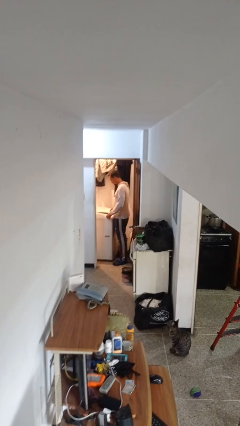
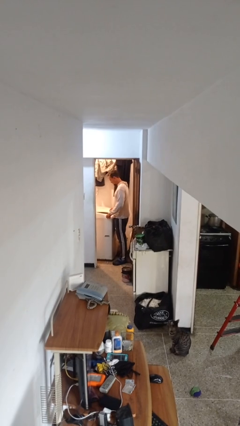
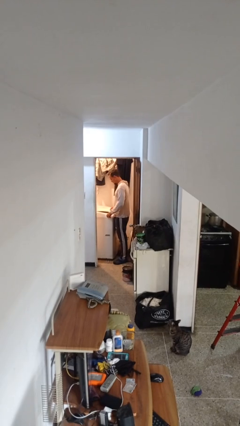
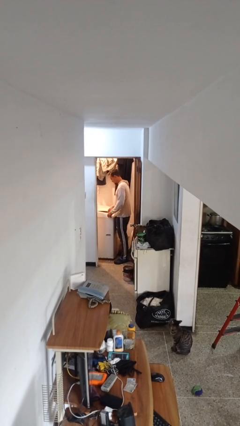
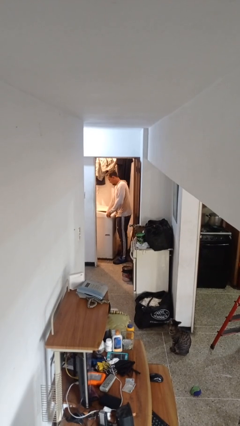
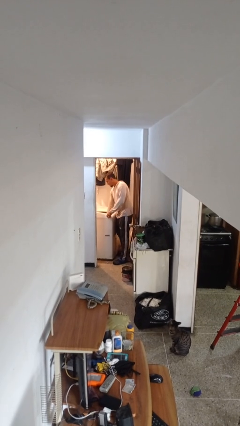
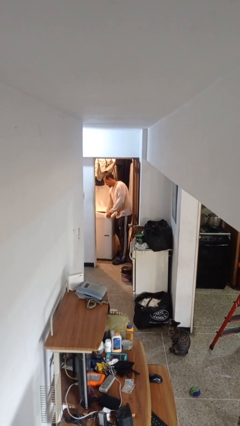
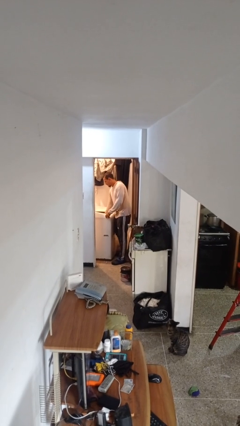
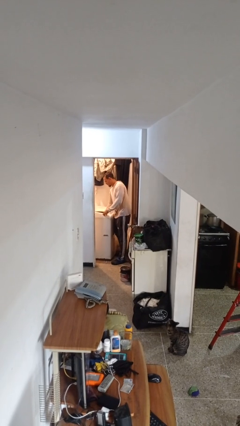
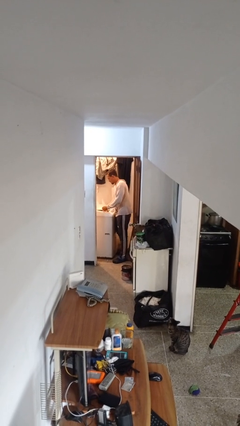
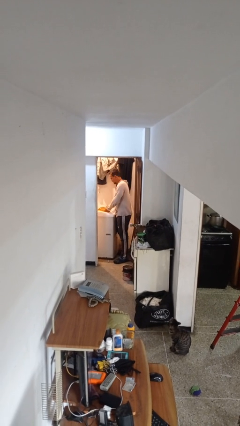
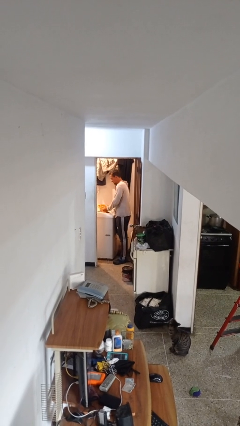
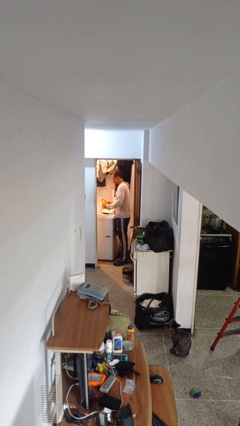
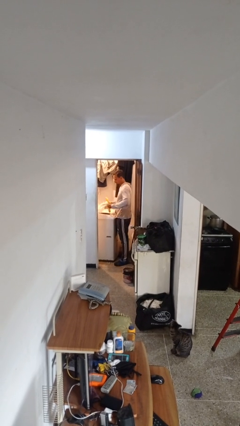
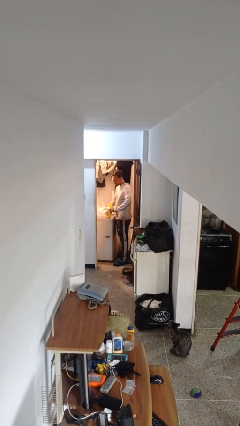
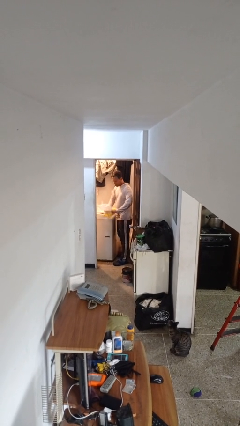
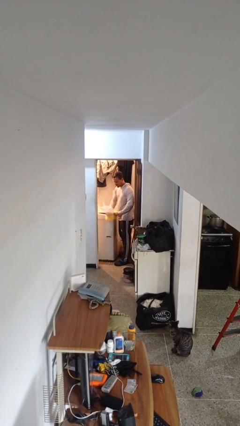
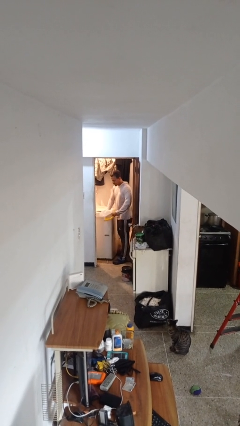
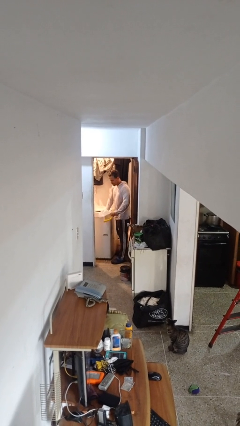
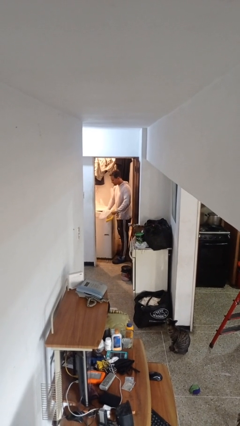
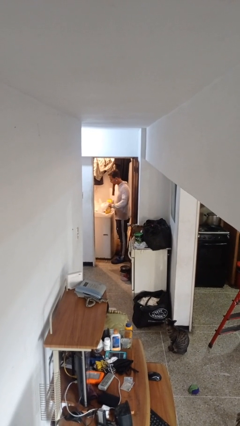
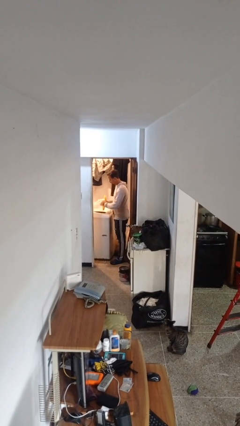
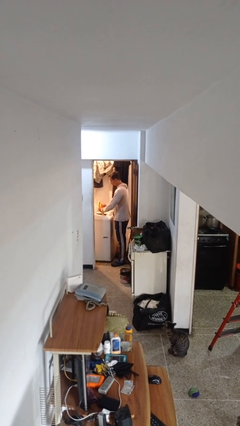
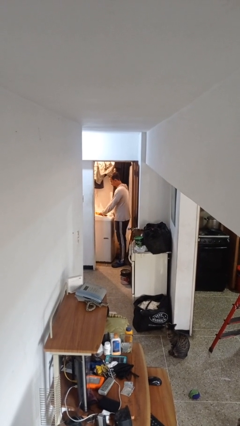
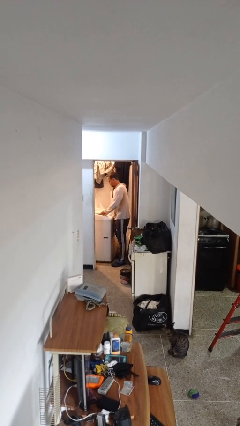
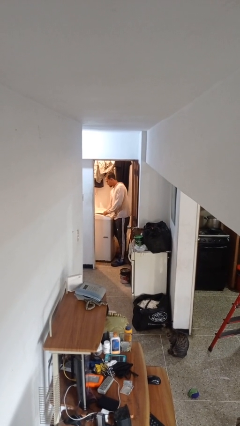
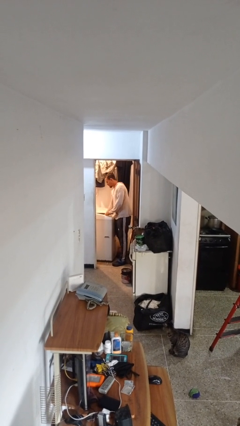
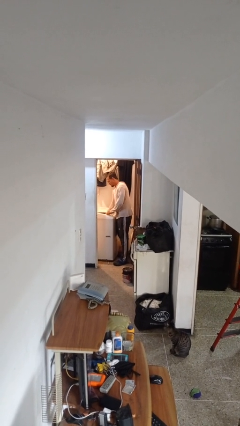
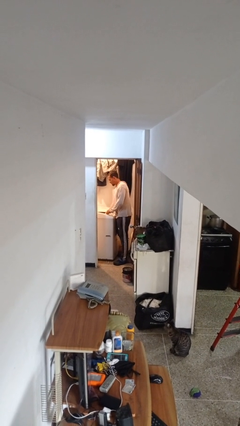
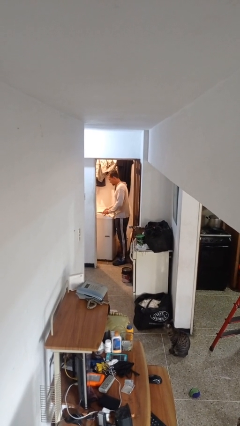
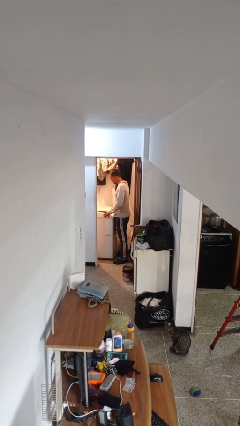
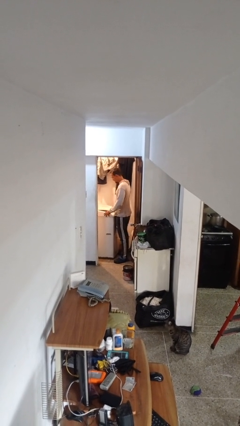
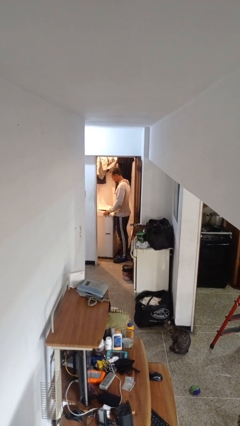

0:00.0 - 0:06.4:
person cleans dryer lint trap

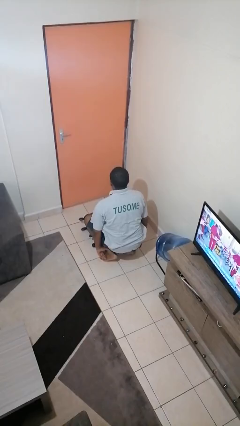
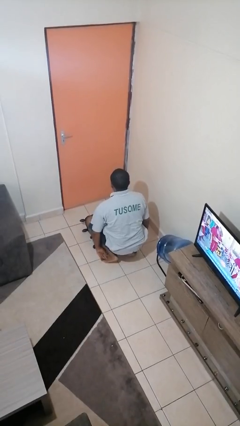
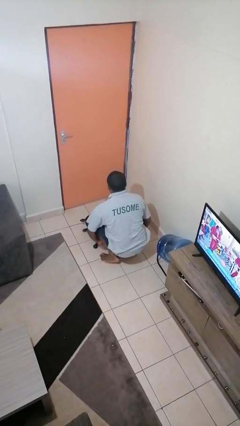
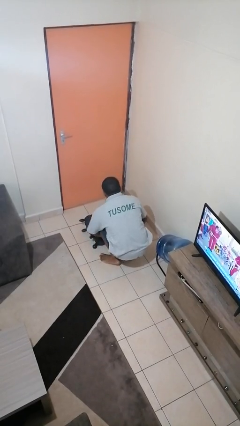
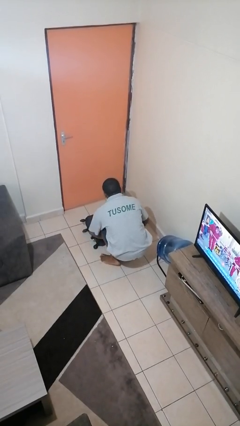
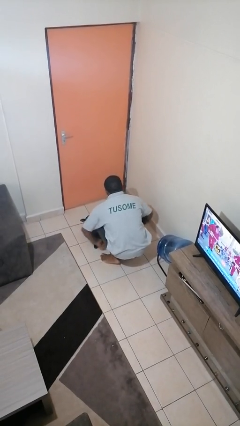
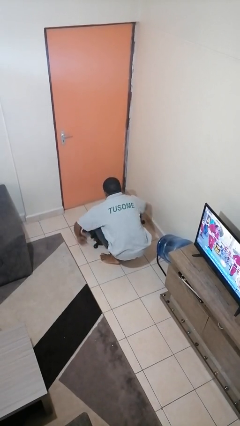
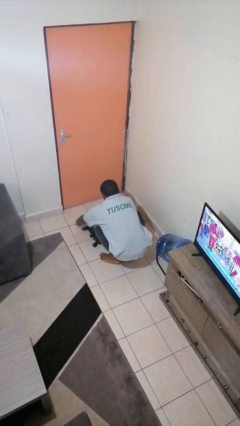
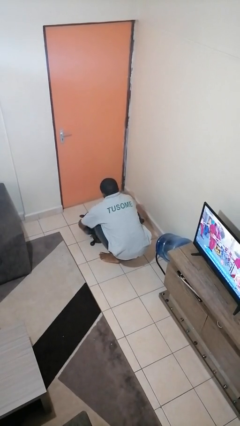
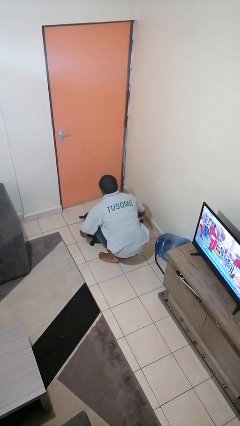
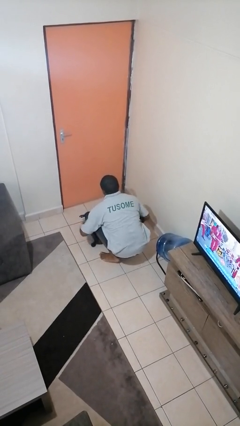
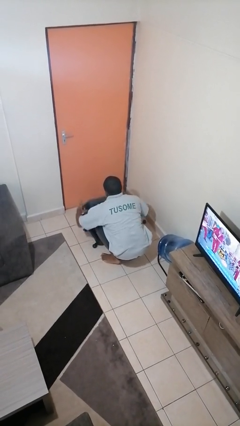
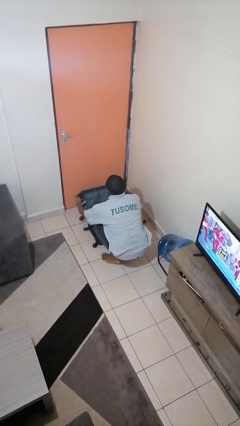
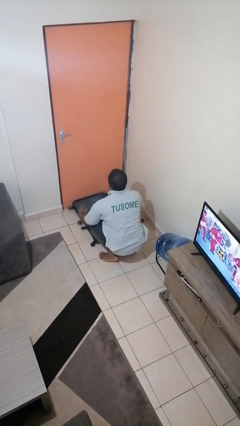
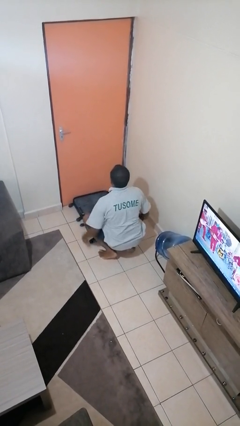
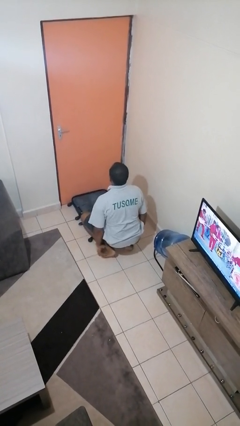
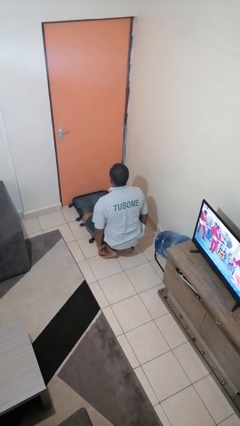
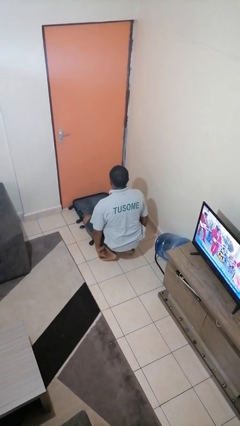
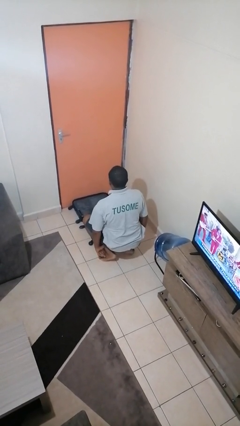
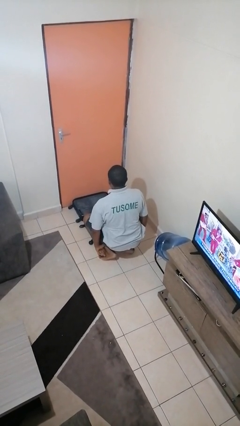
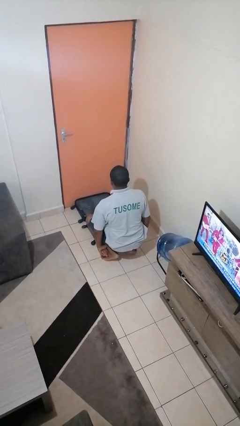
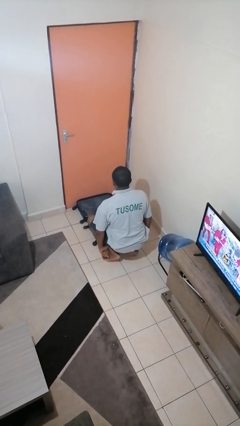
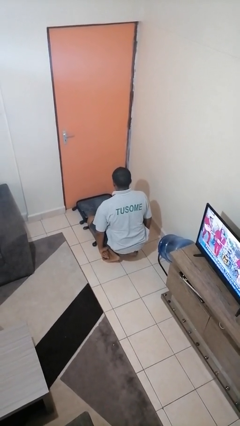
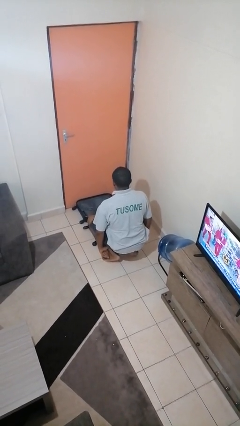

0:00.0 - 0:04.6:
person opens suitcase

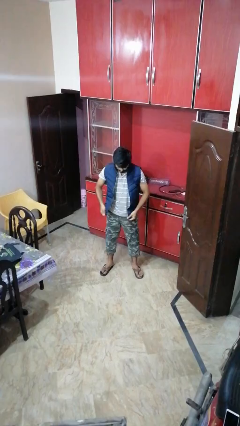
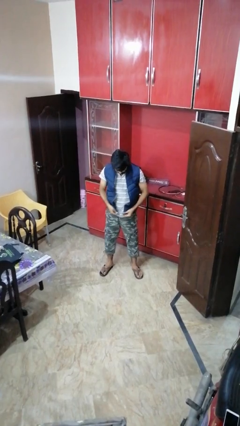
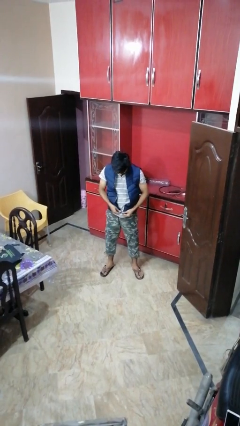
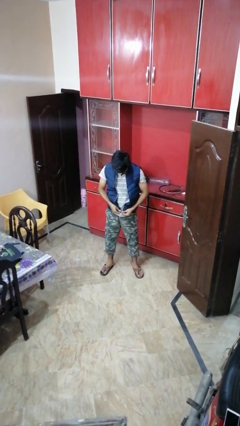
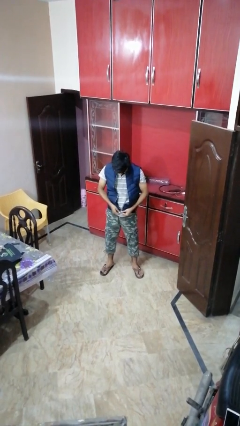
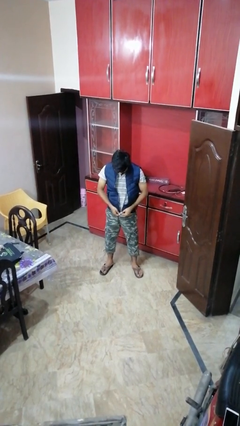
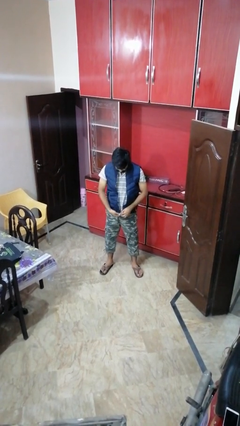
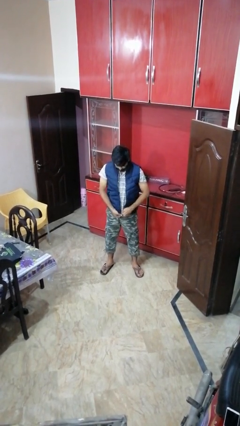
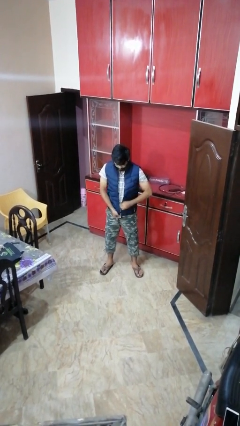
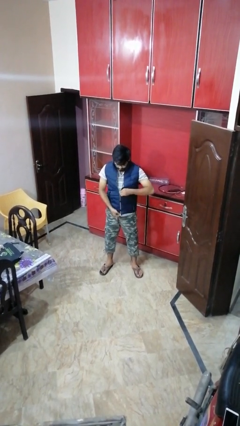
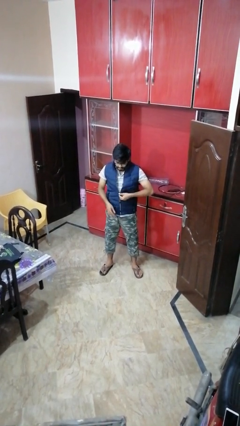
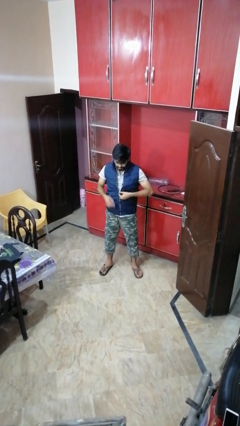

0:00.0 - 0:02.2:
person zips up jacket

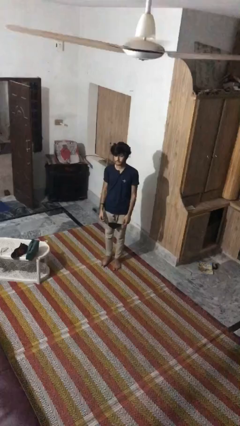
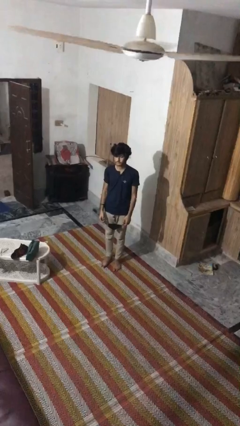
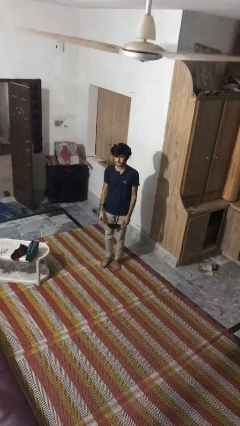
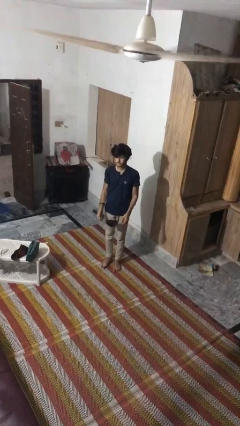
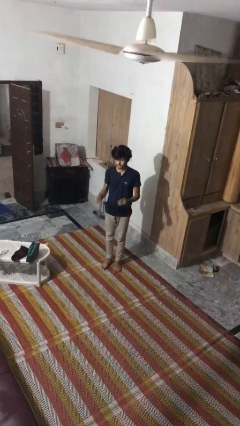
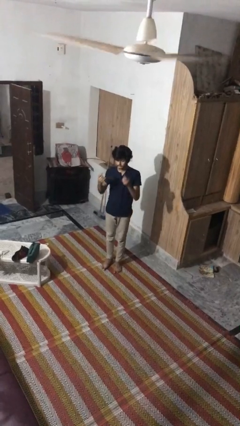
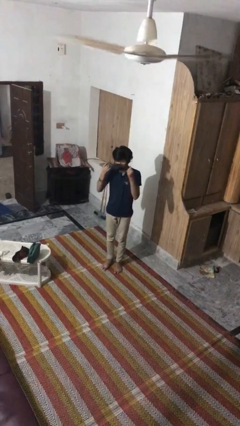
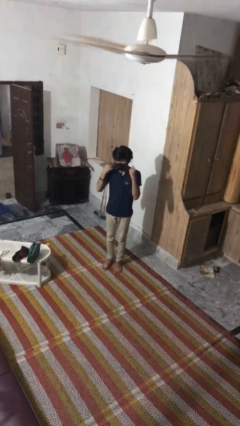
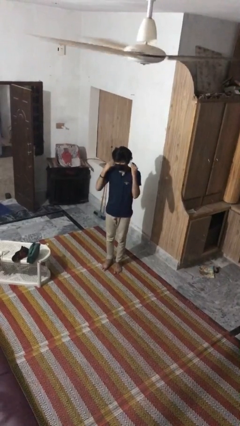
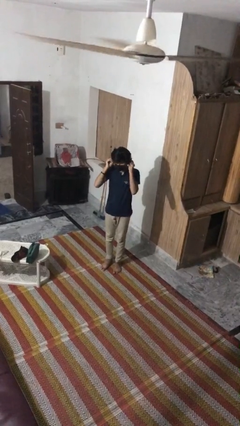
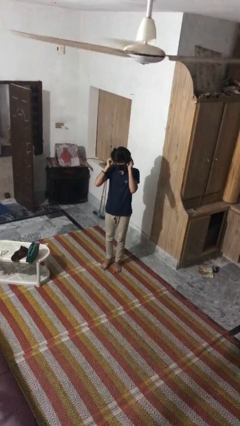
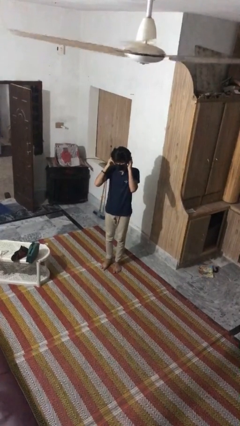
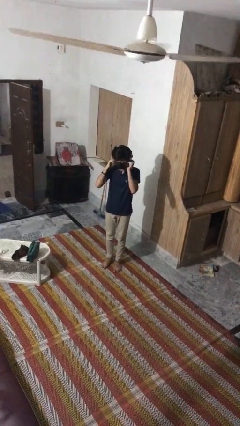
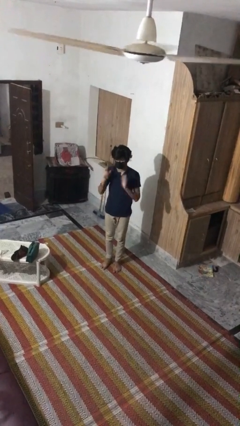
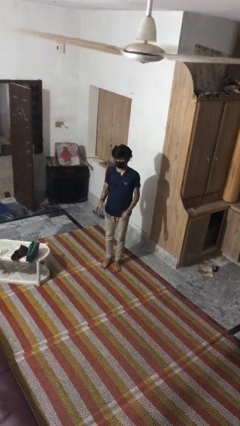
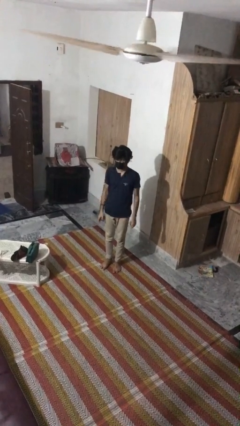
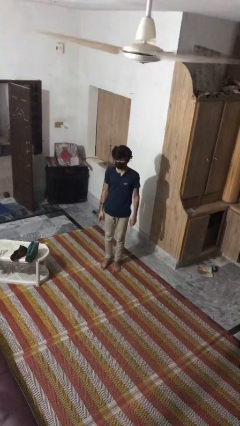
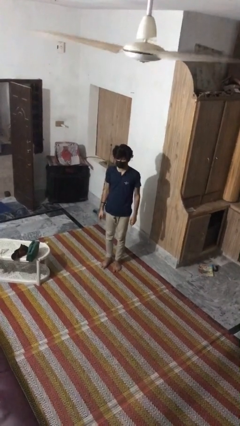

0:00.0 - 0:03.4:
person puts on facemask

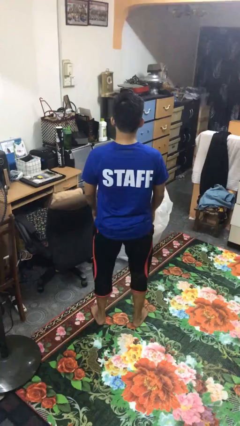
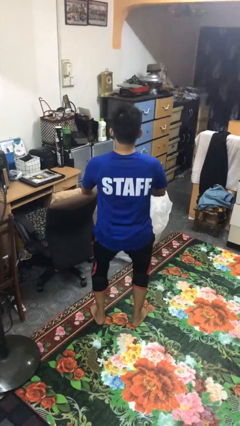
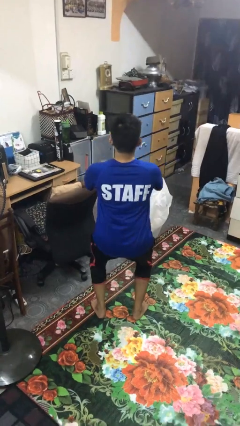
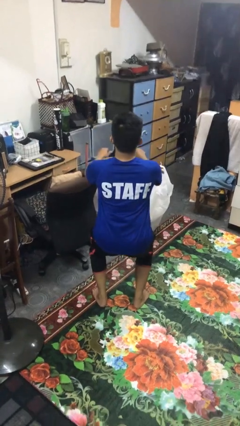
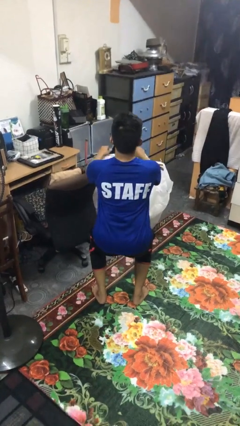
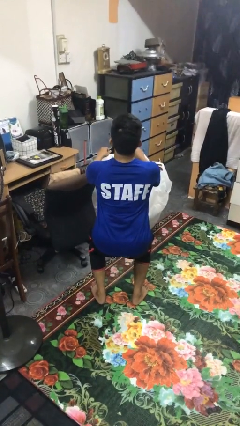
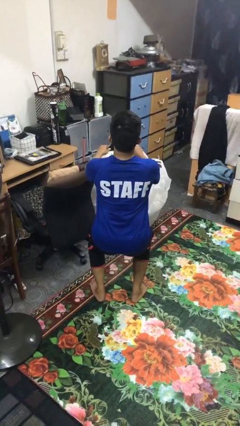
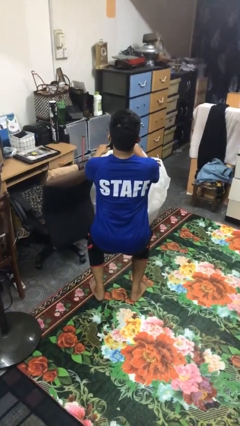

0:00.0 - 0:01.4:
person squats
